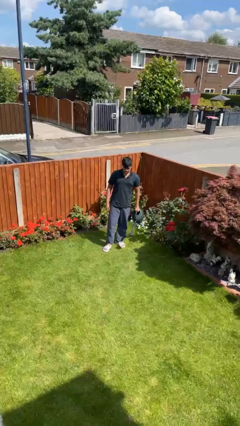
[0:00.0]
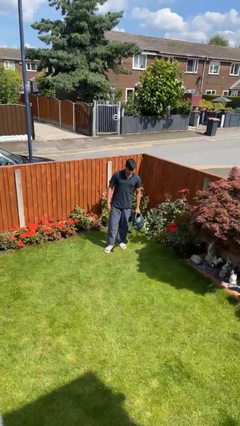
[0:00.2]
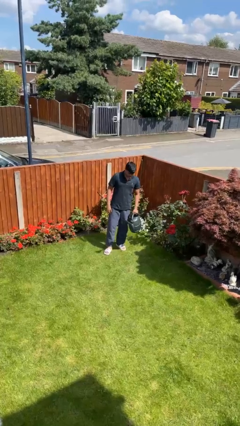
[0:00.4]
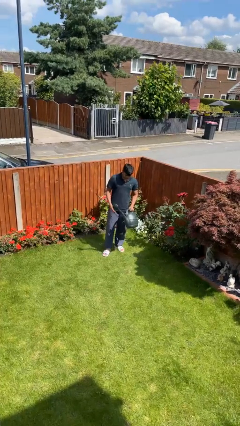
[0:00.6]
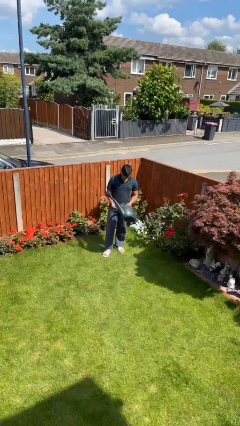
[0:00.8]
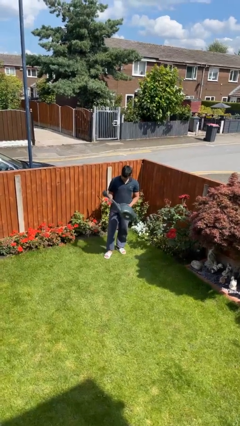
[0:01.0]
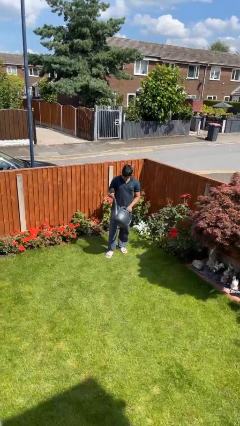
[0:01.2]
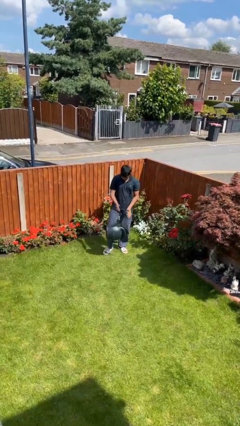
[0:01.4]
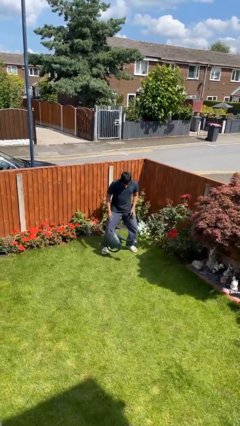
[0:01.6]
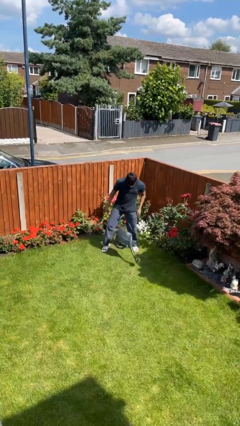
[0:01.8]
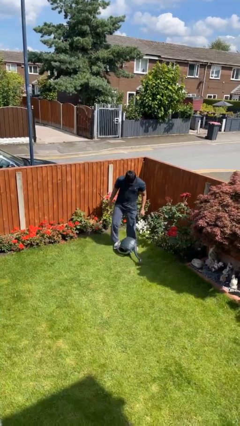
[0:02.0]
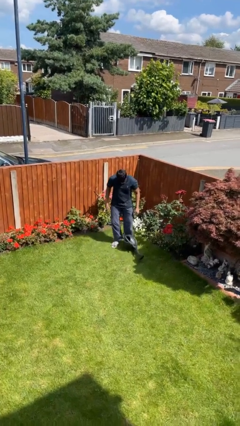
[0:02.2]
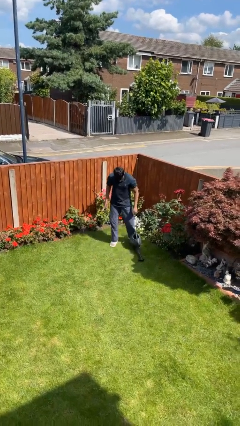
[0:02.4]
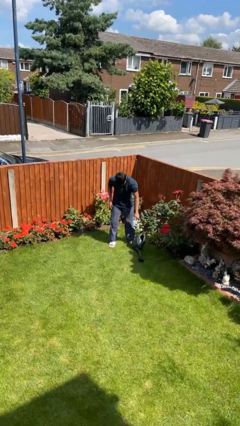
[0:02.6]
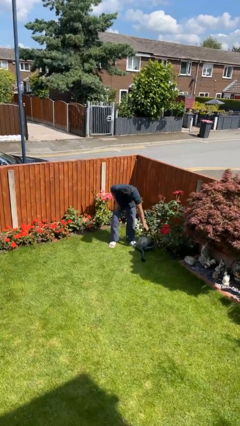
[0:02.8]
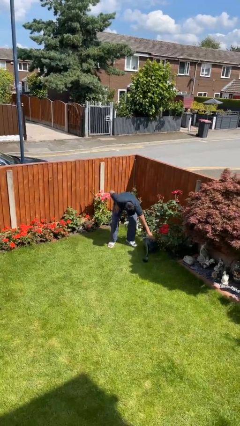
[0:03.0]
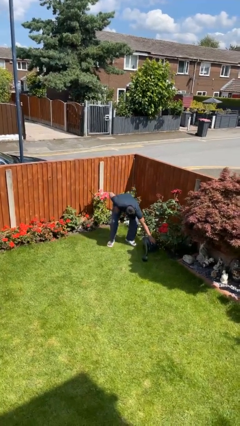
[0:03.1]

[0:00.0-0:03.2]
person drops object

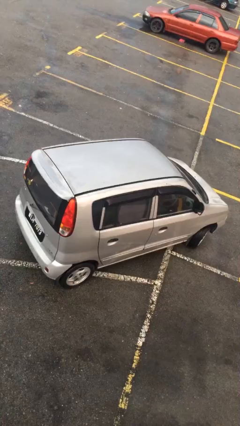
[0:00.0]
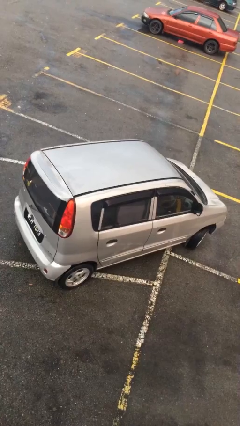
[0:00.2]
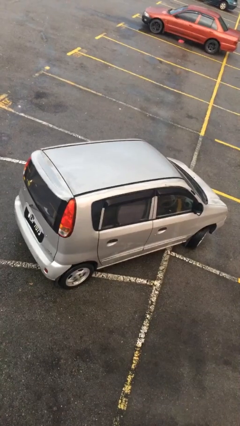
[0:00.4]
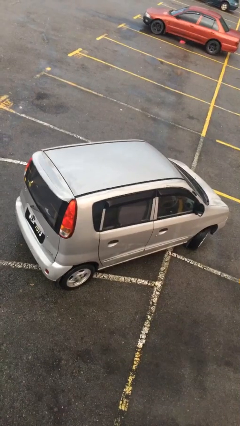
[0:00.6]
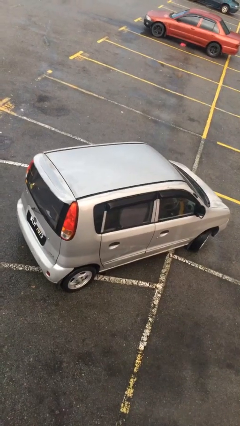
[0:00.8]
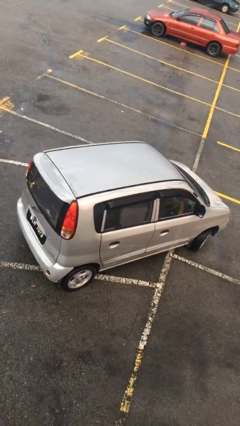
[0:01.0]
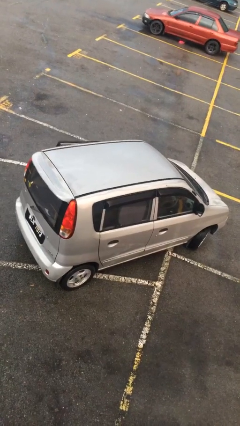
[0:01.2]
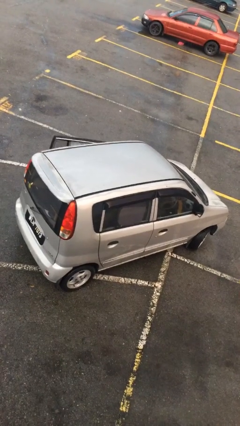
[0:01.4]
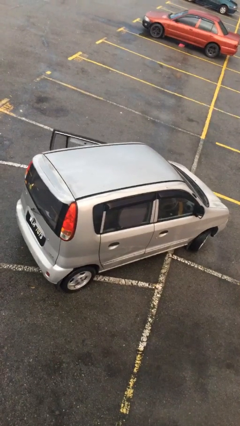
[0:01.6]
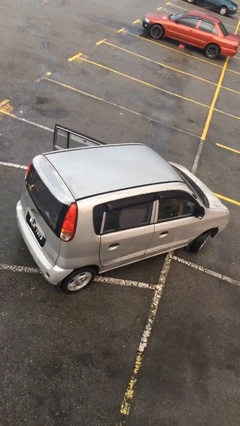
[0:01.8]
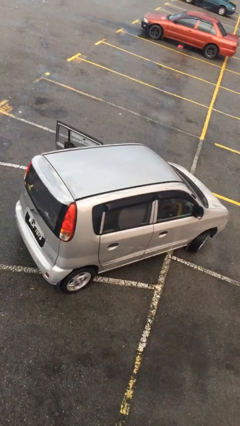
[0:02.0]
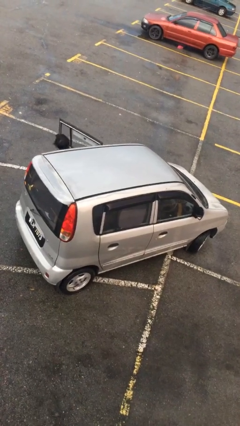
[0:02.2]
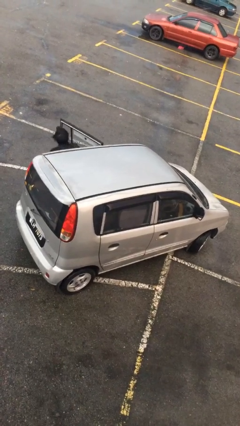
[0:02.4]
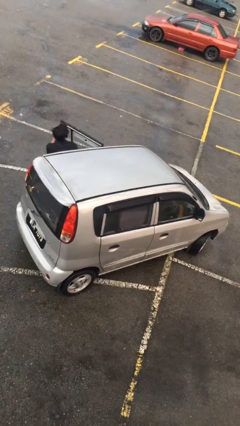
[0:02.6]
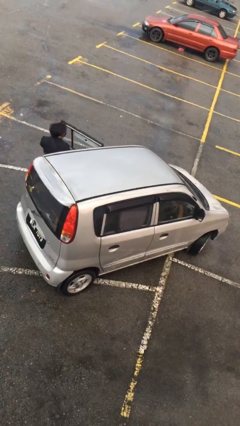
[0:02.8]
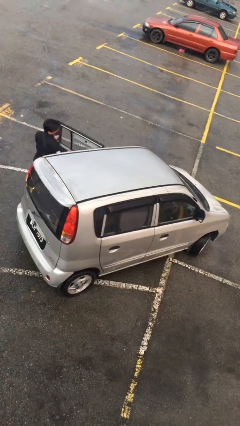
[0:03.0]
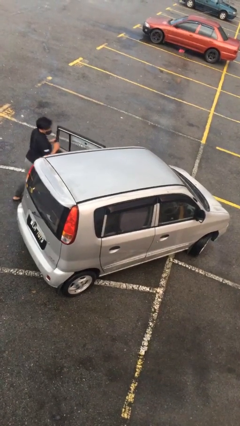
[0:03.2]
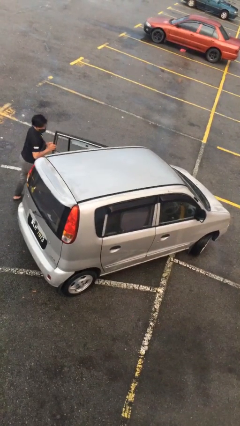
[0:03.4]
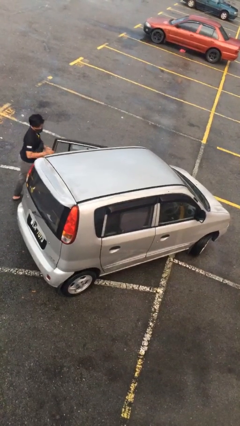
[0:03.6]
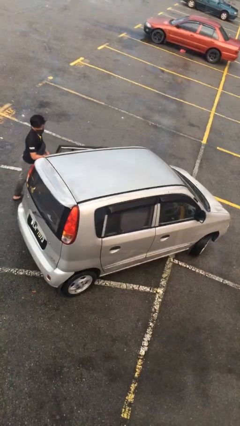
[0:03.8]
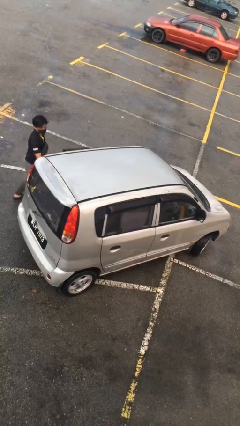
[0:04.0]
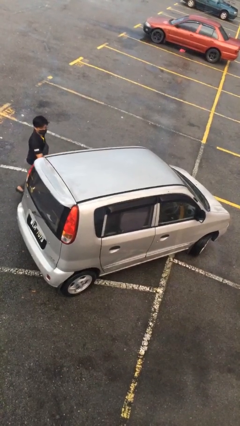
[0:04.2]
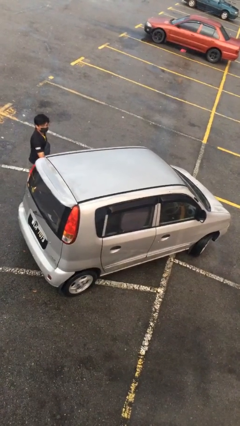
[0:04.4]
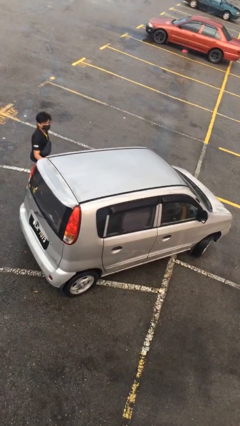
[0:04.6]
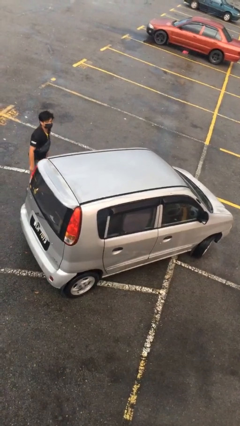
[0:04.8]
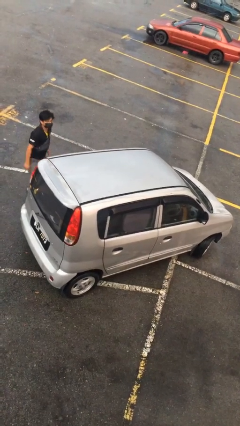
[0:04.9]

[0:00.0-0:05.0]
car drops off person

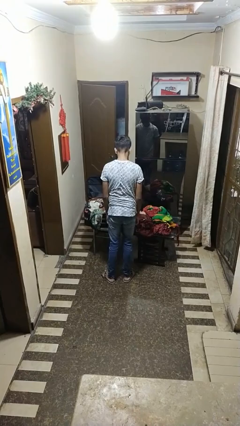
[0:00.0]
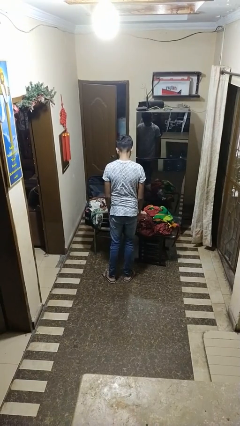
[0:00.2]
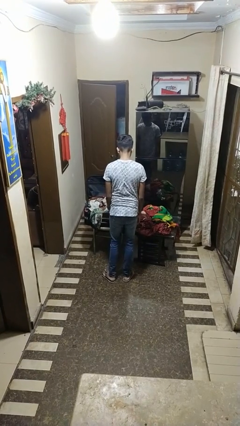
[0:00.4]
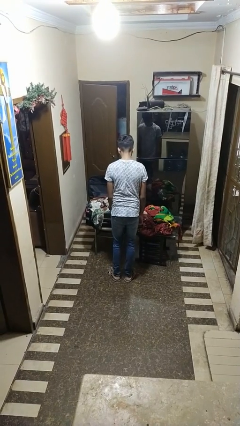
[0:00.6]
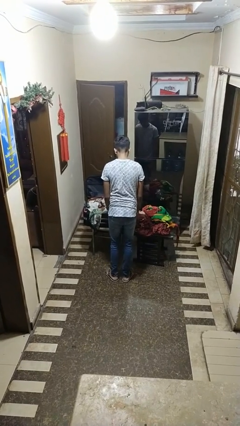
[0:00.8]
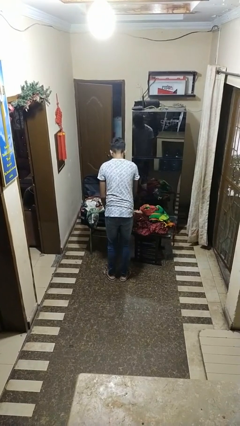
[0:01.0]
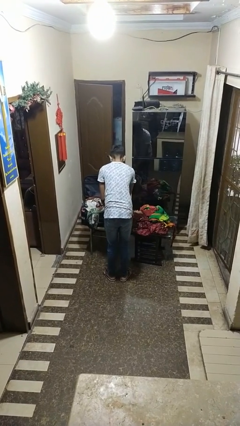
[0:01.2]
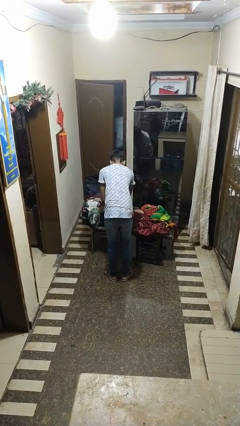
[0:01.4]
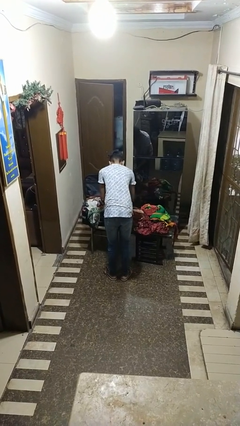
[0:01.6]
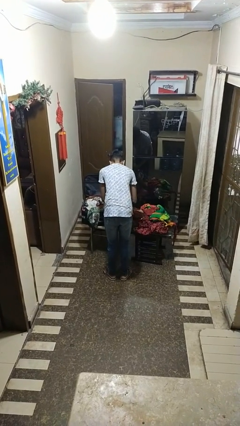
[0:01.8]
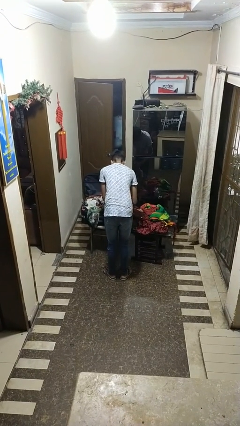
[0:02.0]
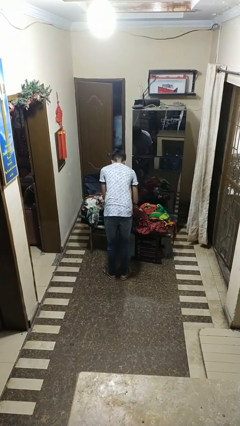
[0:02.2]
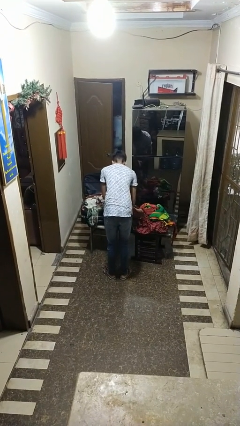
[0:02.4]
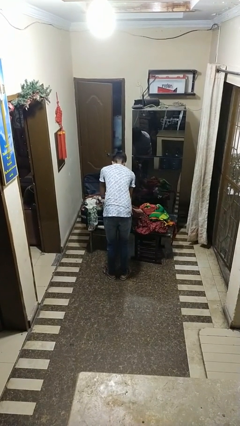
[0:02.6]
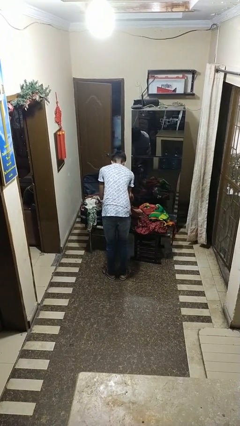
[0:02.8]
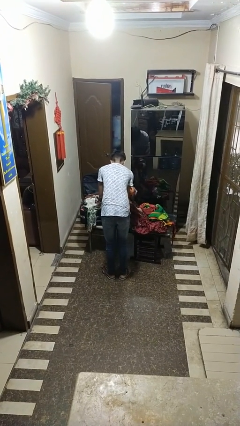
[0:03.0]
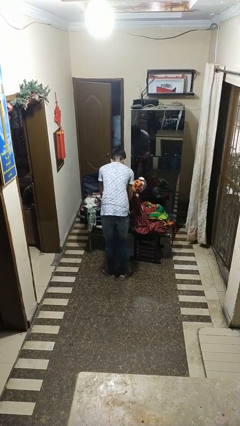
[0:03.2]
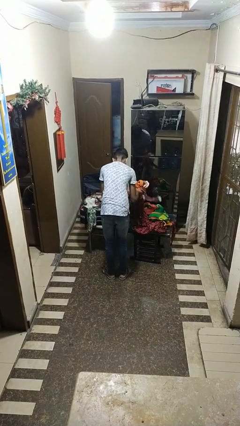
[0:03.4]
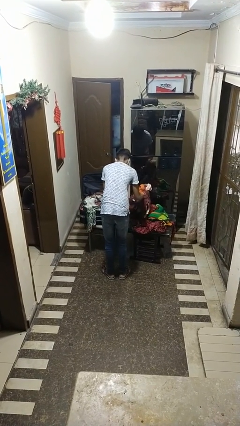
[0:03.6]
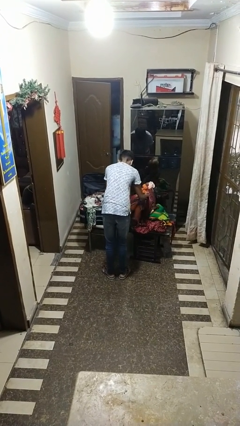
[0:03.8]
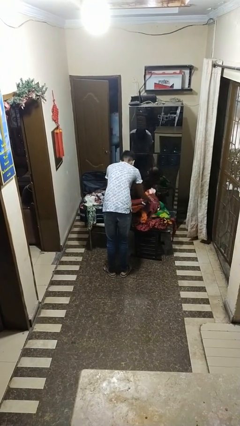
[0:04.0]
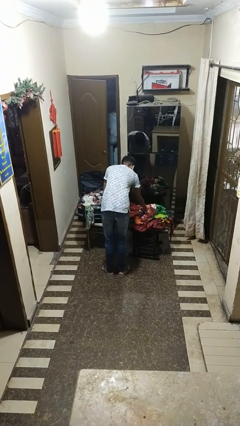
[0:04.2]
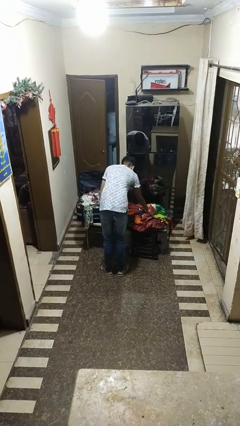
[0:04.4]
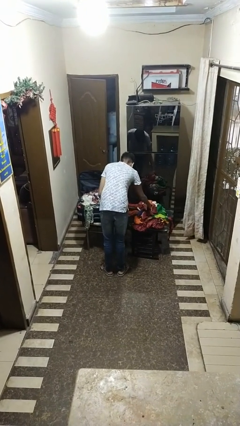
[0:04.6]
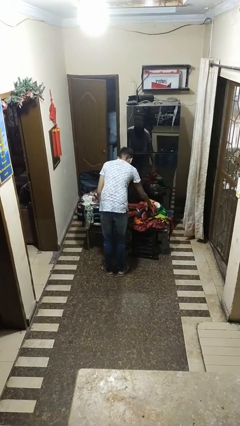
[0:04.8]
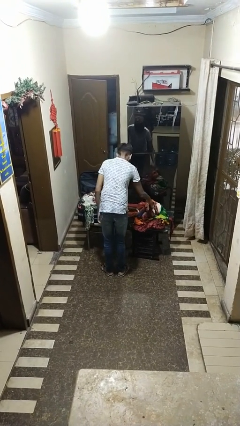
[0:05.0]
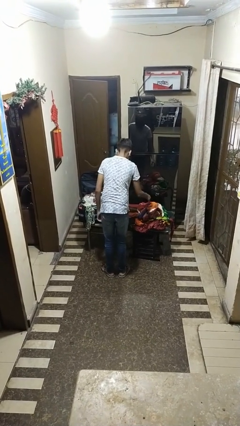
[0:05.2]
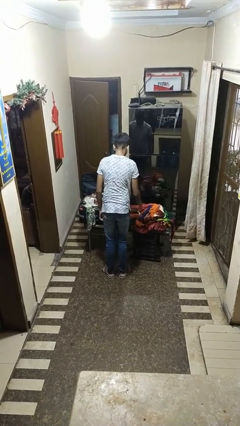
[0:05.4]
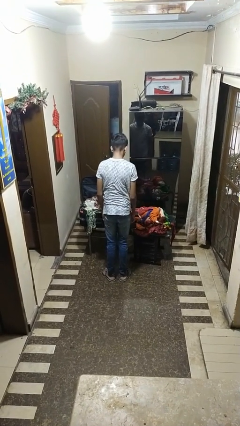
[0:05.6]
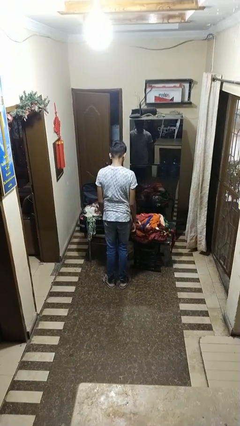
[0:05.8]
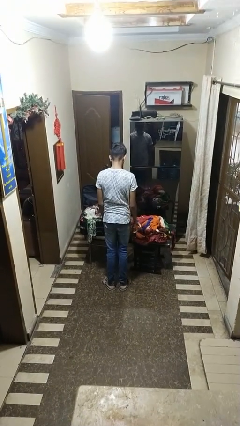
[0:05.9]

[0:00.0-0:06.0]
person unloads clothes from suitcase

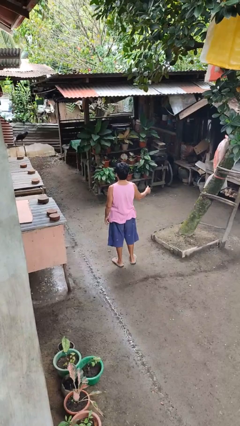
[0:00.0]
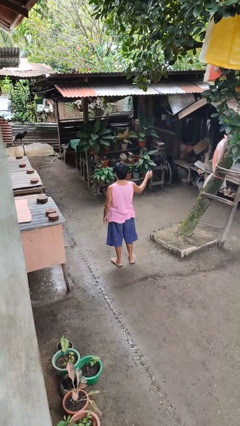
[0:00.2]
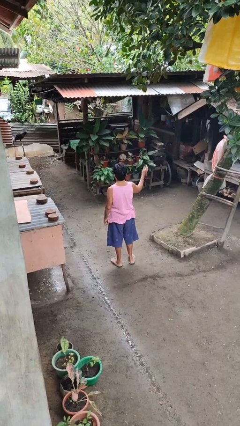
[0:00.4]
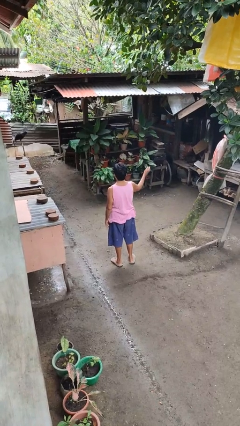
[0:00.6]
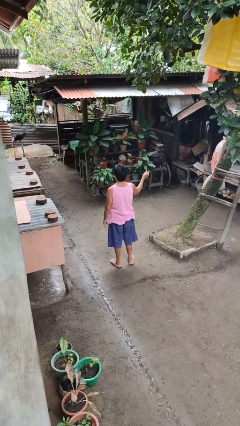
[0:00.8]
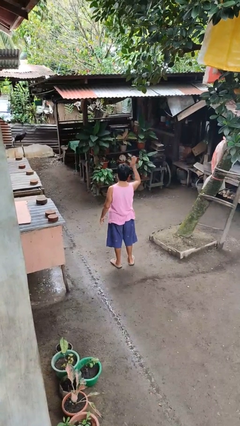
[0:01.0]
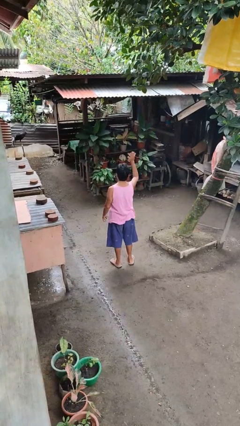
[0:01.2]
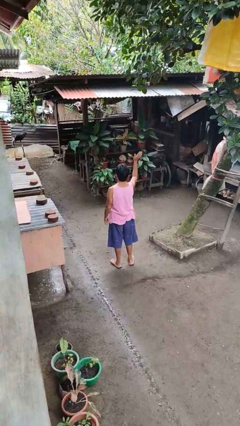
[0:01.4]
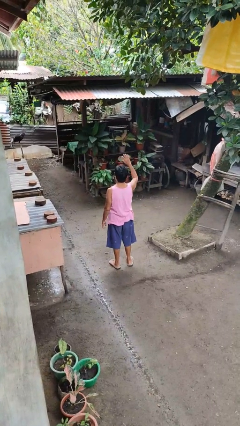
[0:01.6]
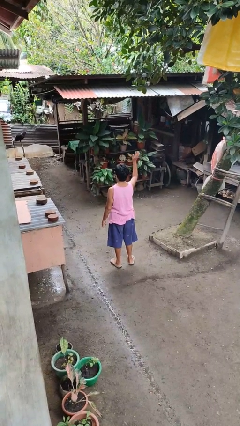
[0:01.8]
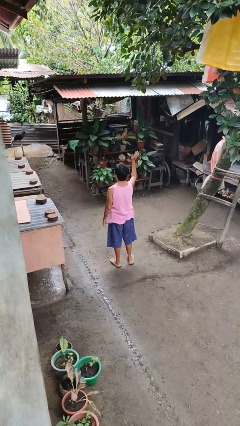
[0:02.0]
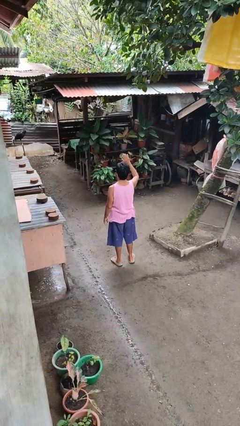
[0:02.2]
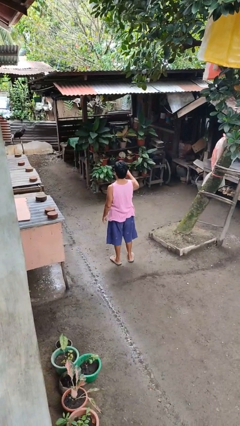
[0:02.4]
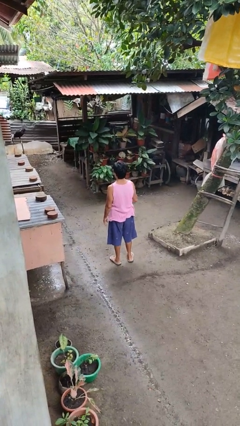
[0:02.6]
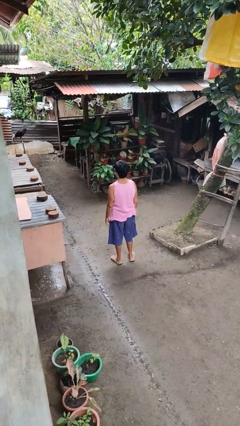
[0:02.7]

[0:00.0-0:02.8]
person waves at person

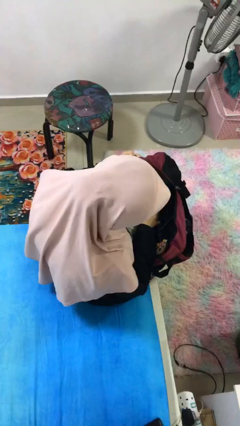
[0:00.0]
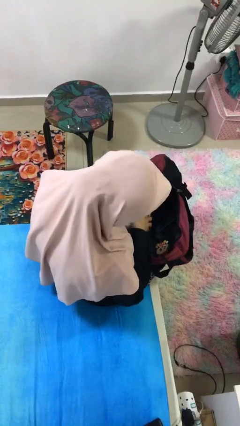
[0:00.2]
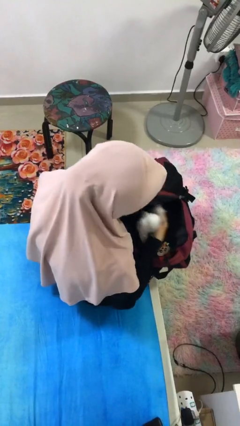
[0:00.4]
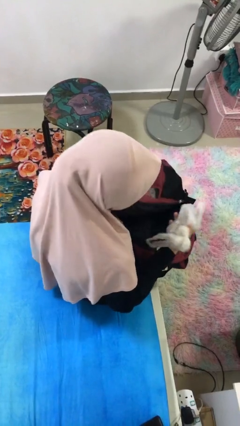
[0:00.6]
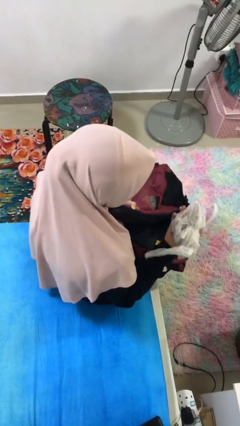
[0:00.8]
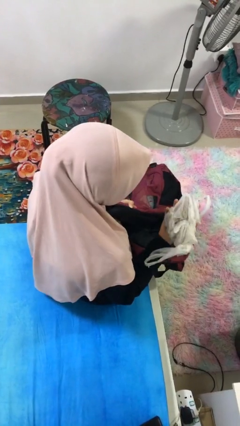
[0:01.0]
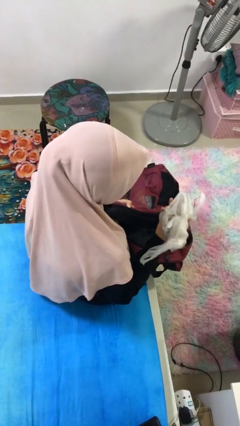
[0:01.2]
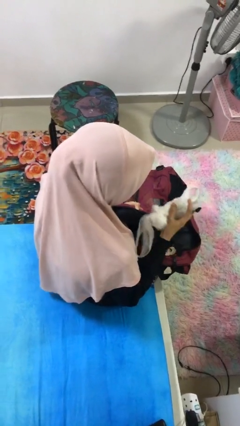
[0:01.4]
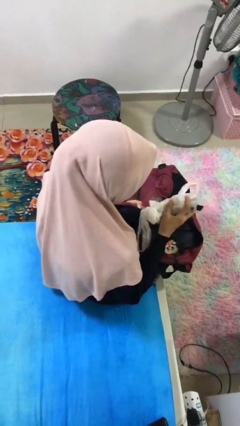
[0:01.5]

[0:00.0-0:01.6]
person takes object from backpack
